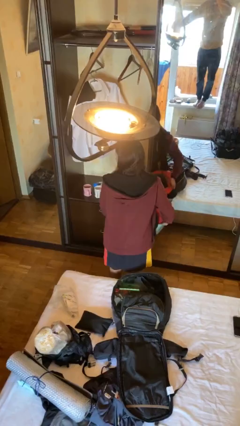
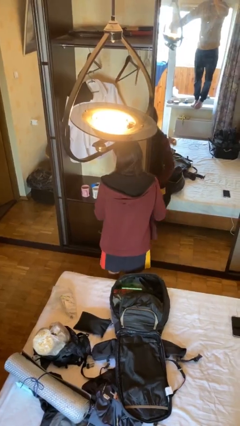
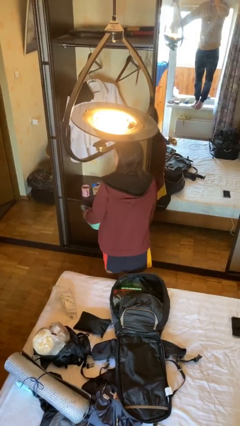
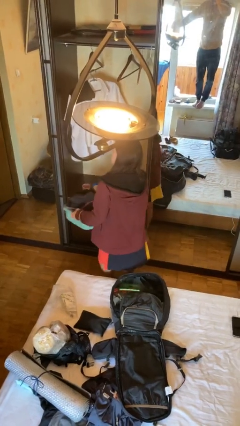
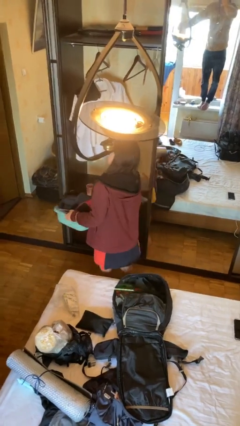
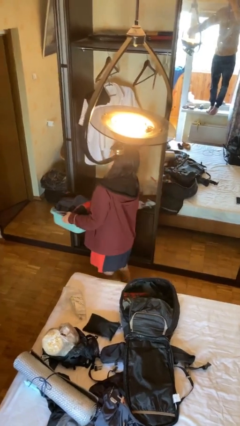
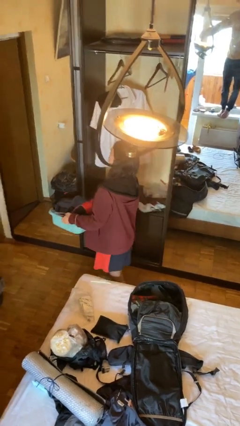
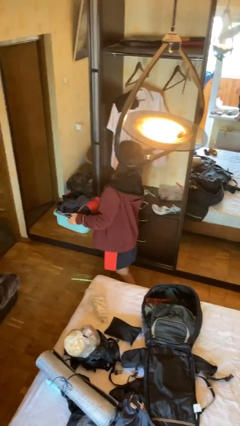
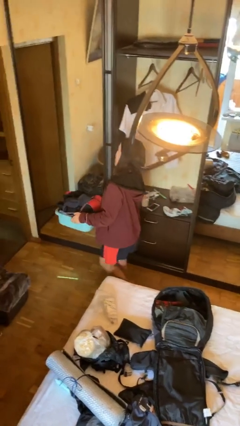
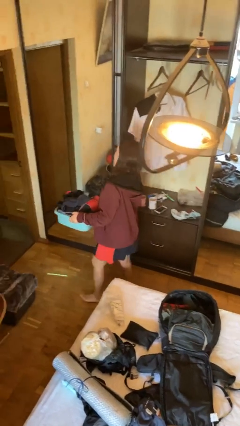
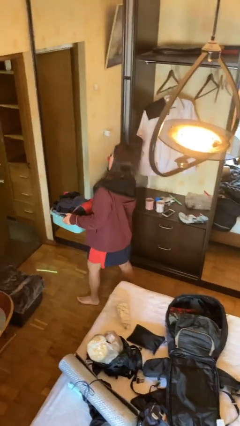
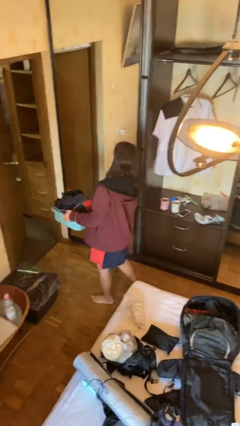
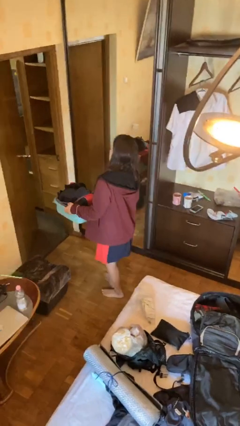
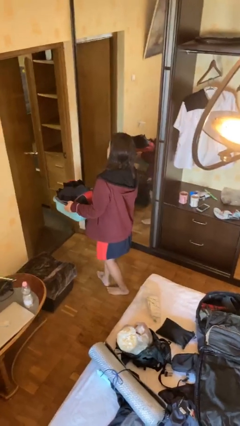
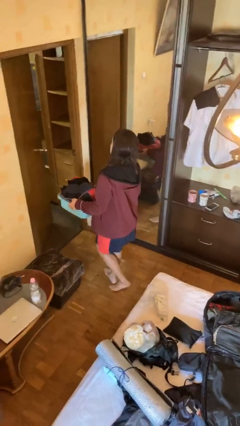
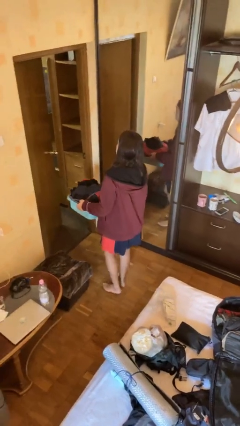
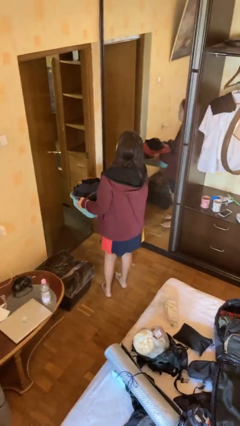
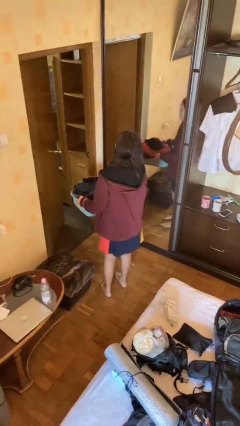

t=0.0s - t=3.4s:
person carries laundry basket

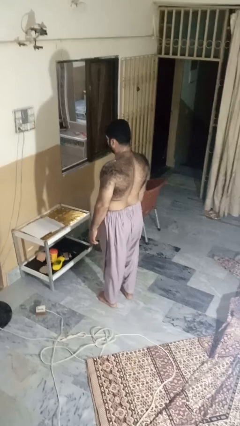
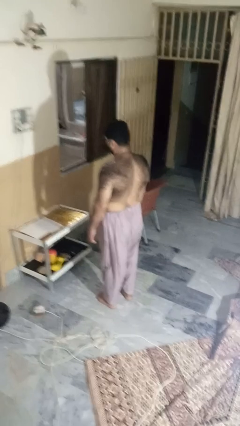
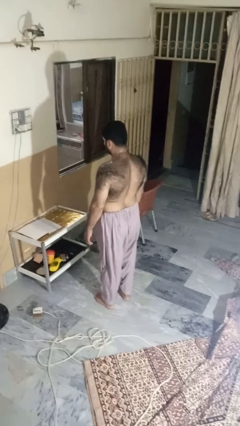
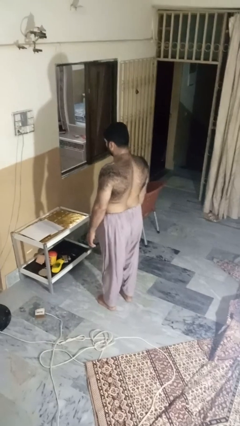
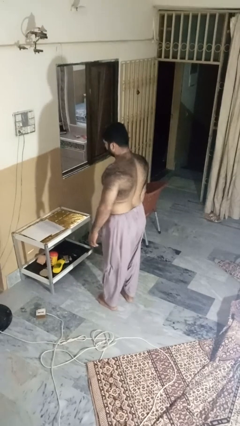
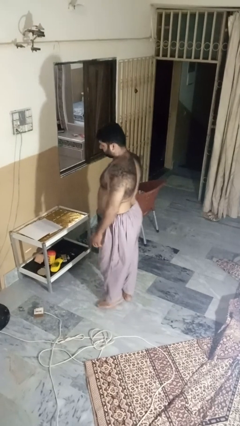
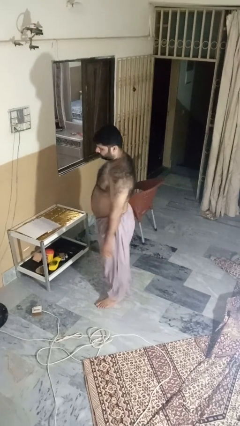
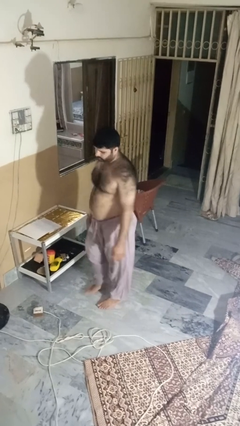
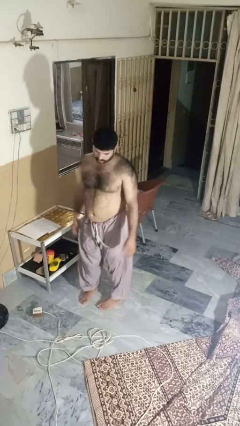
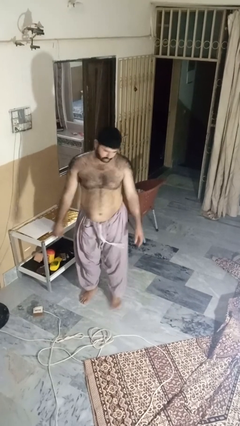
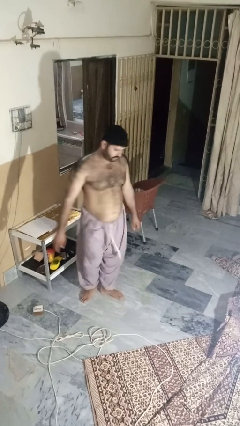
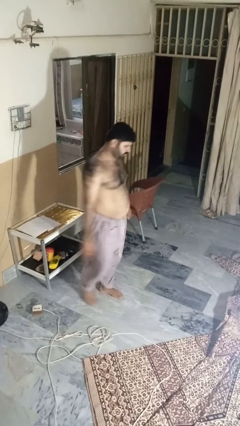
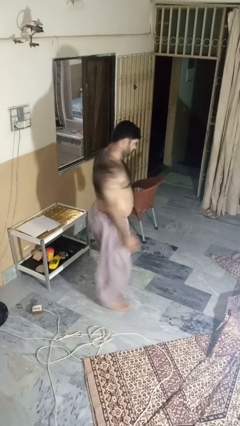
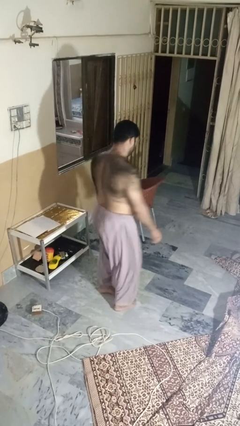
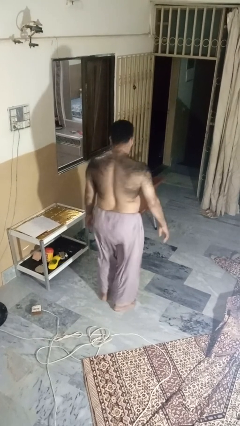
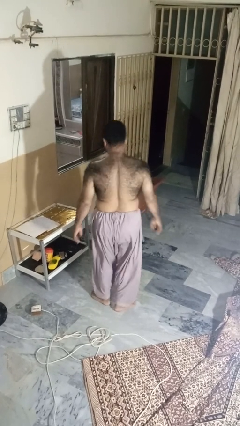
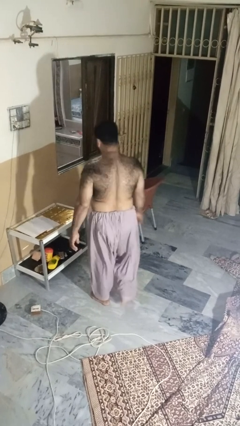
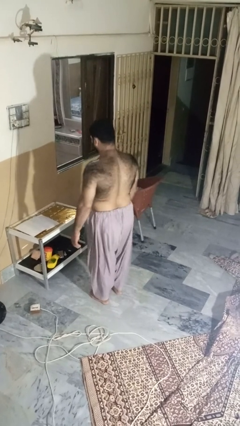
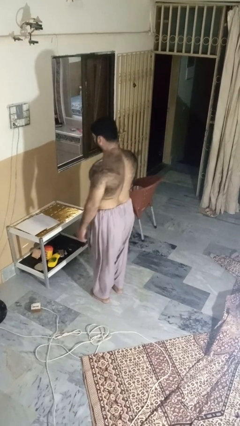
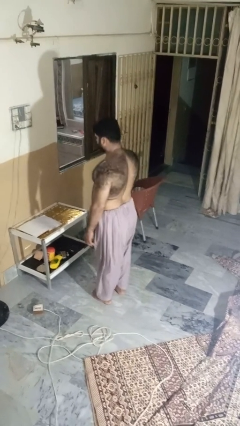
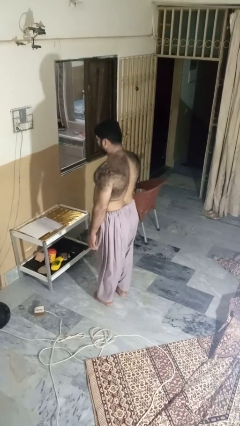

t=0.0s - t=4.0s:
person twirls

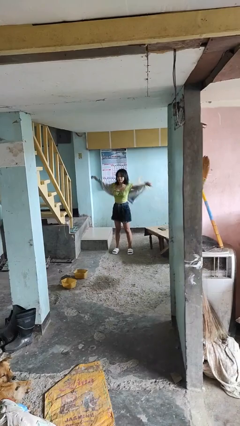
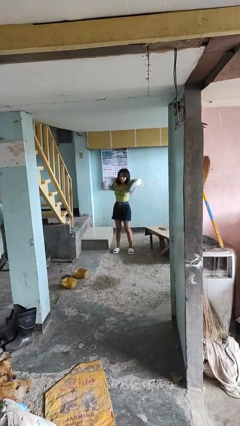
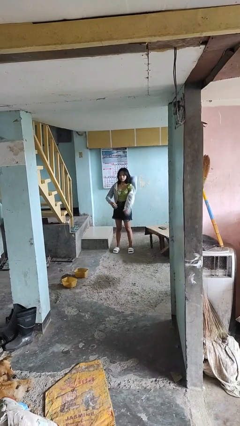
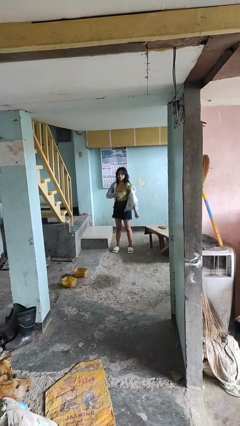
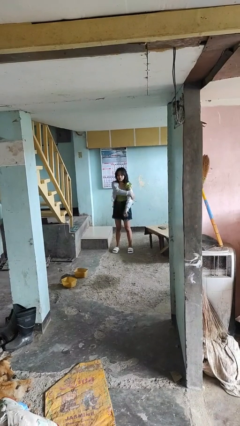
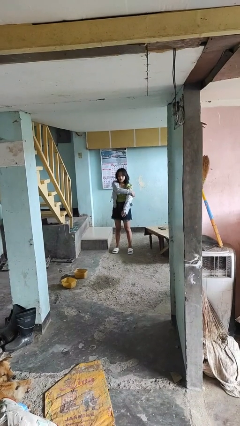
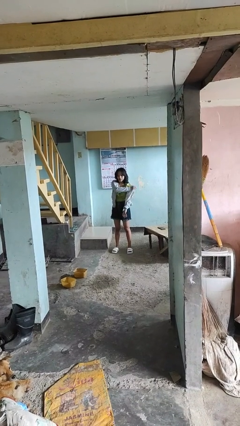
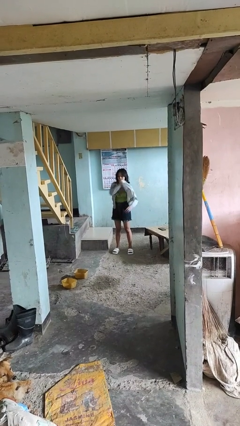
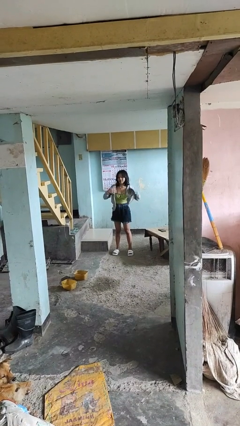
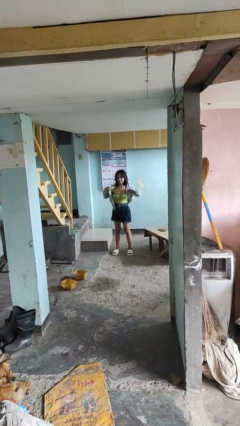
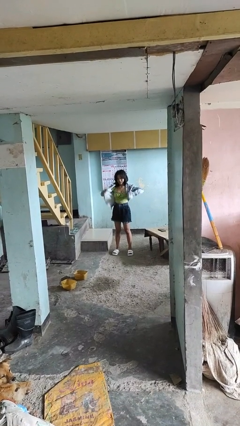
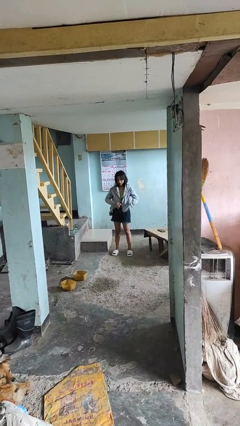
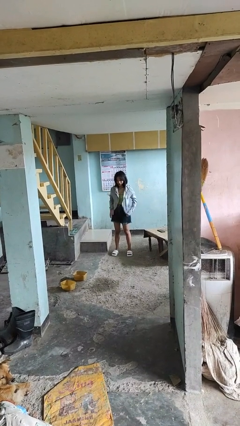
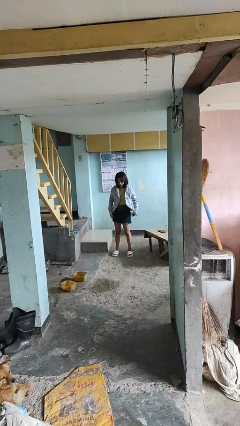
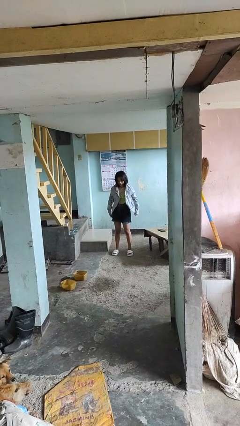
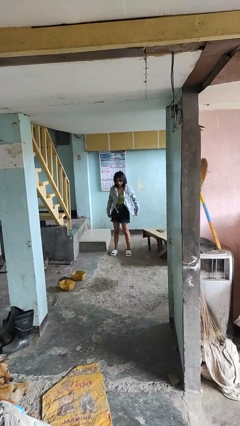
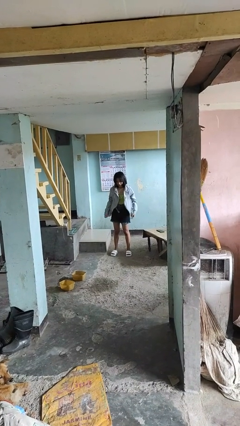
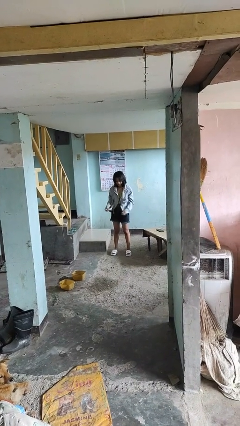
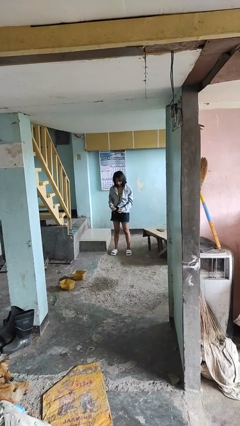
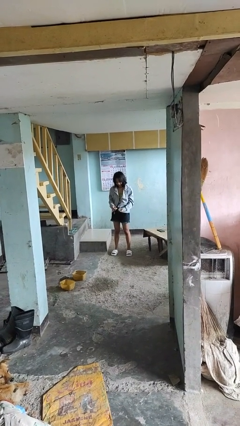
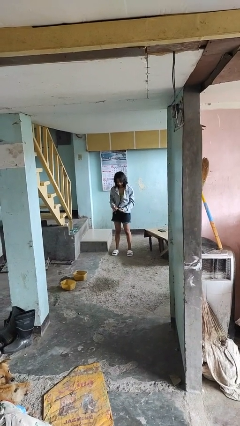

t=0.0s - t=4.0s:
person puts on jacket

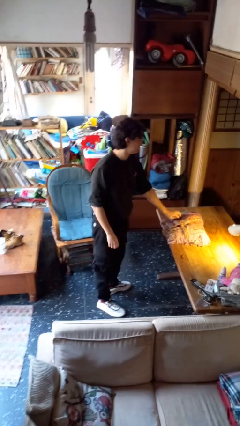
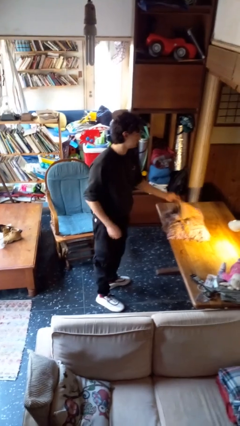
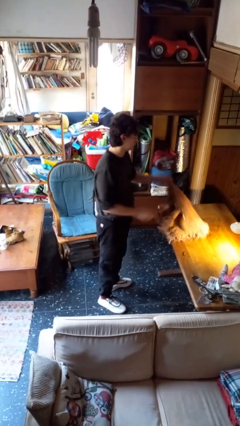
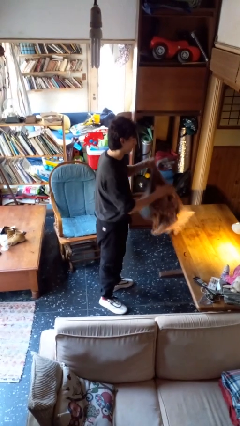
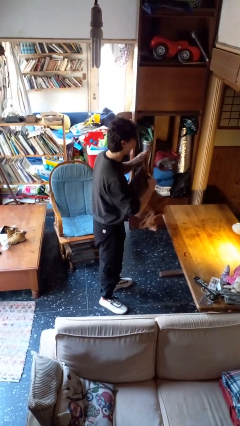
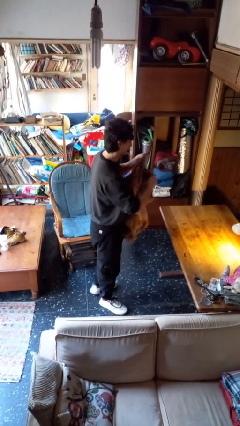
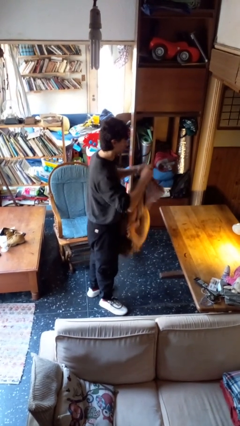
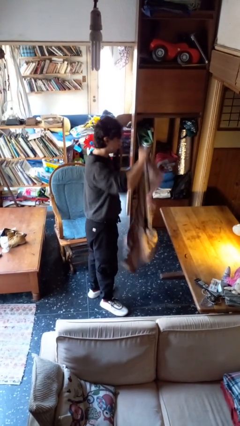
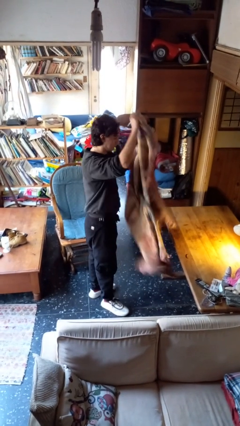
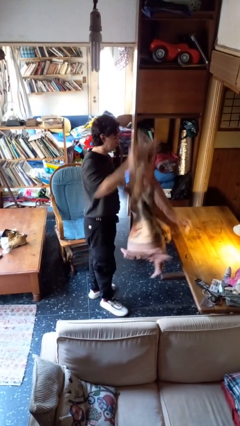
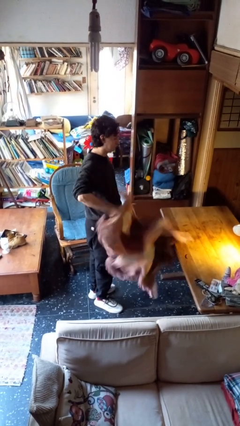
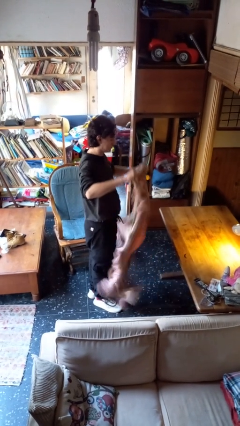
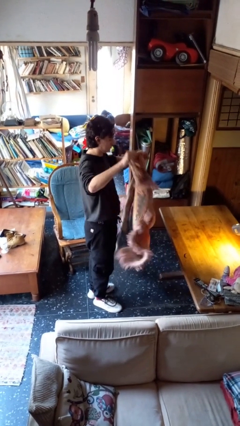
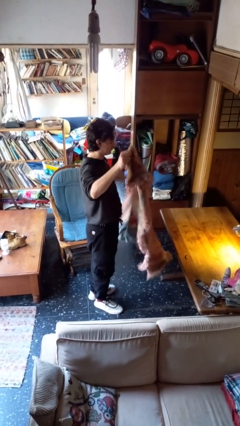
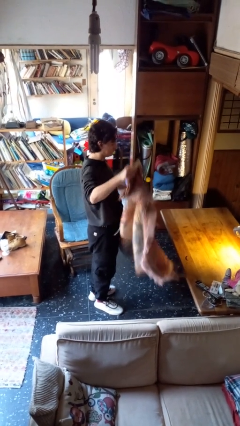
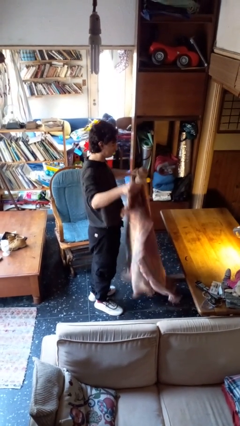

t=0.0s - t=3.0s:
person unfolds blanket

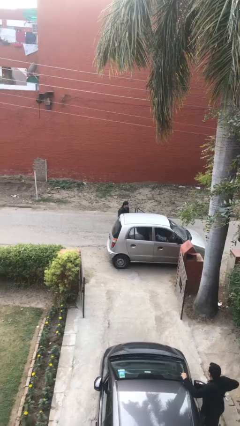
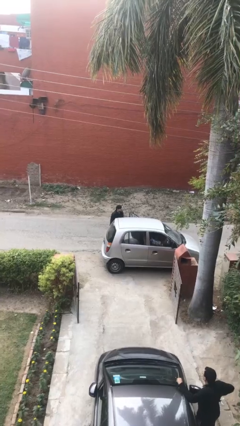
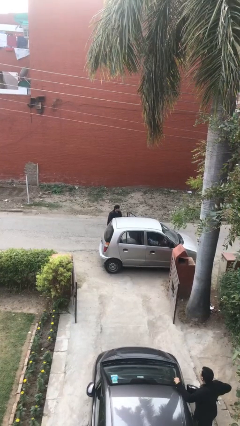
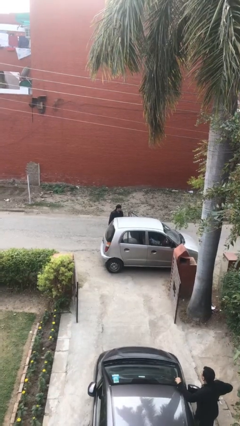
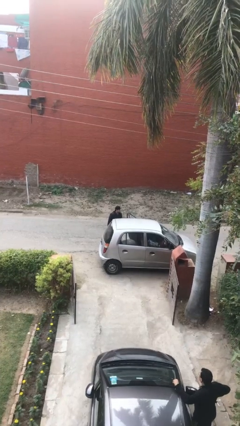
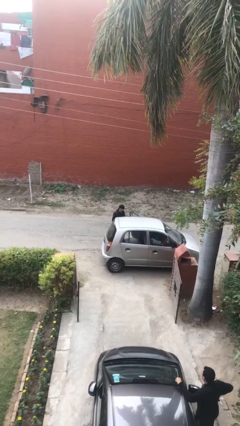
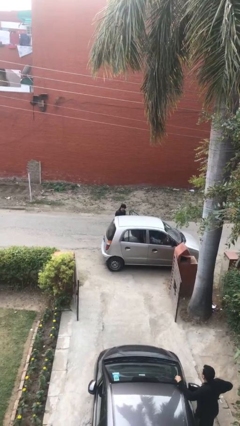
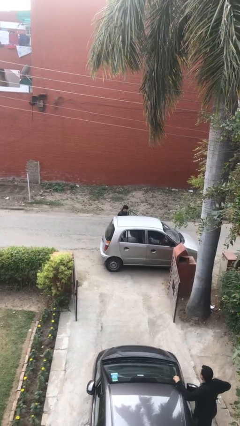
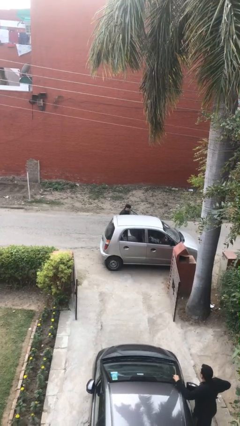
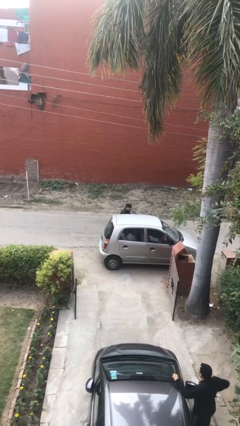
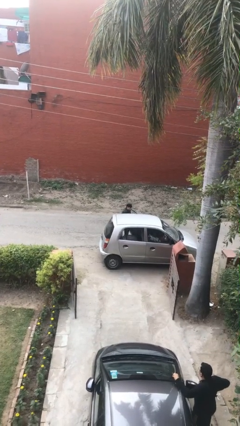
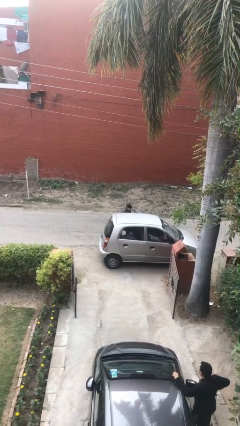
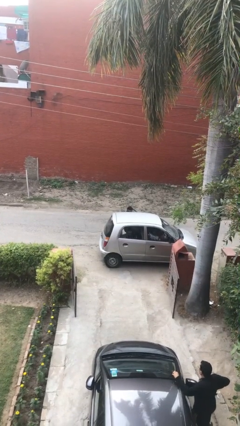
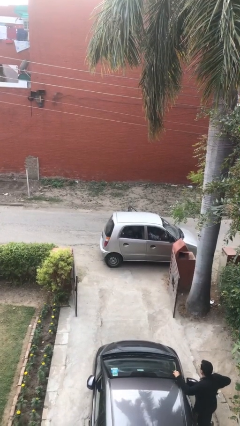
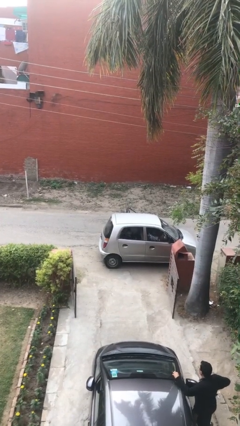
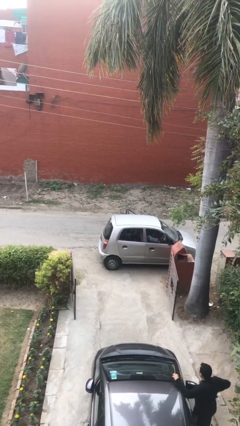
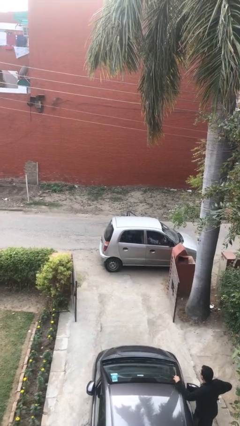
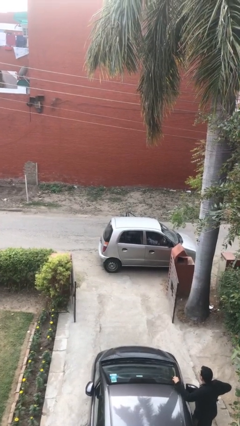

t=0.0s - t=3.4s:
person enters car
